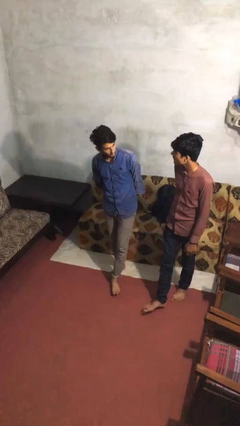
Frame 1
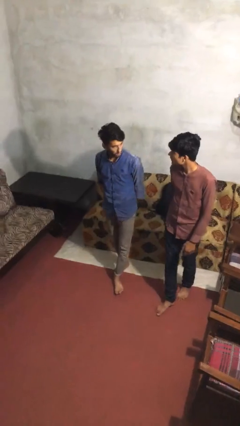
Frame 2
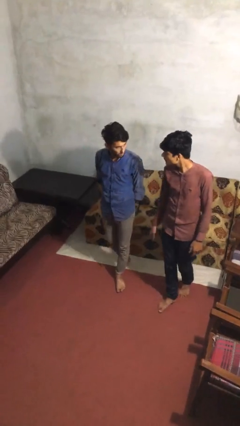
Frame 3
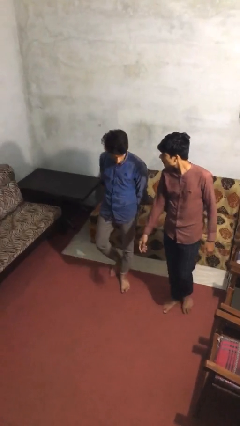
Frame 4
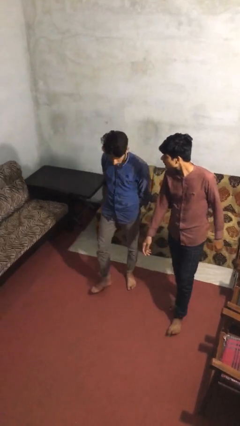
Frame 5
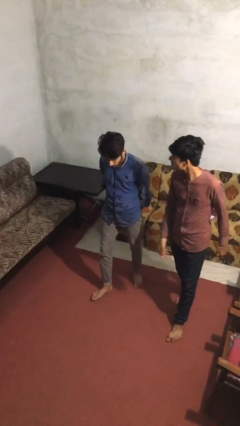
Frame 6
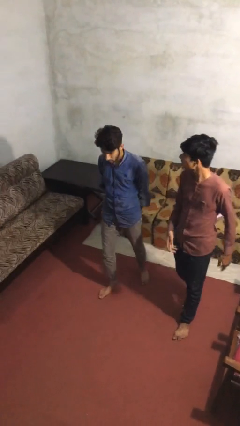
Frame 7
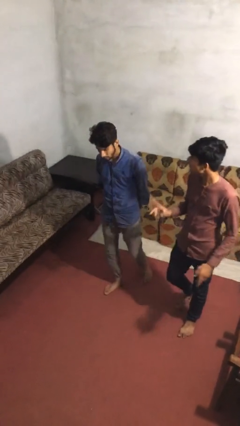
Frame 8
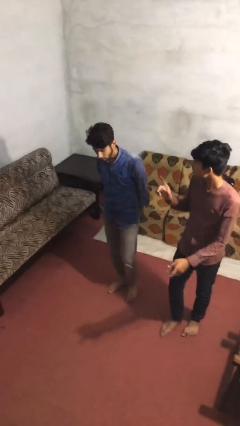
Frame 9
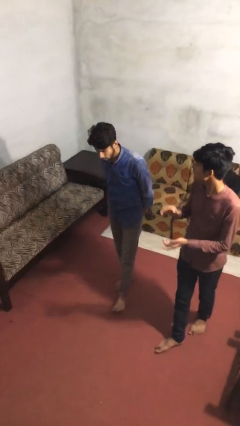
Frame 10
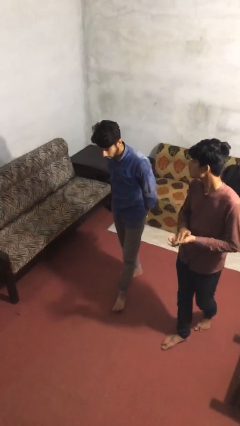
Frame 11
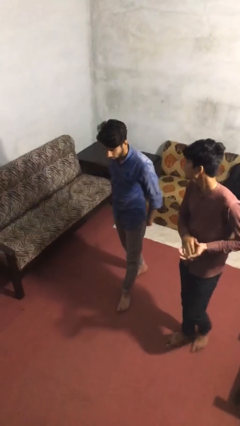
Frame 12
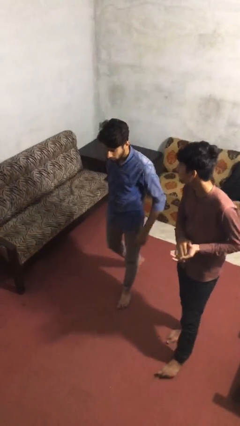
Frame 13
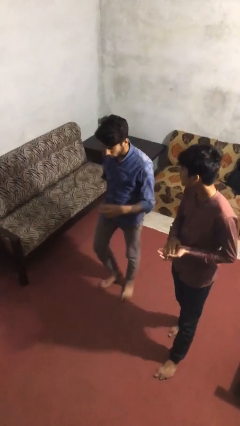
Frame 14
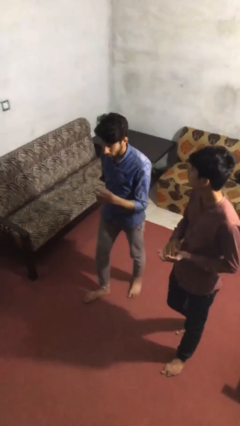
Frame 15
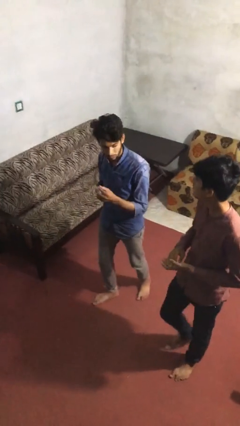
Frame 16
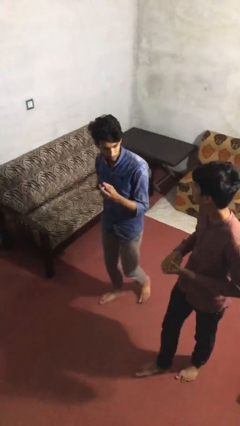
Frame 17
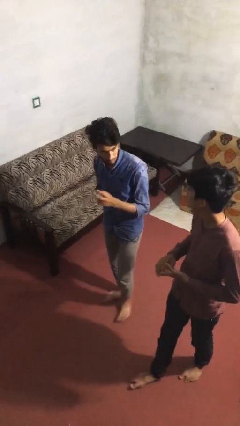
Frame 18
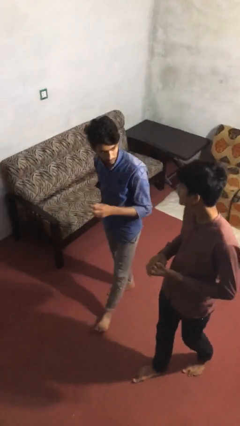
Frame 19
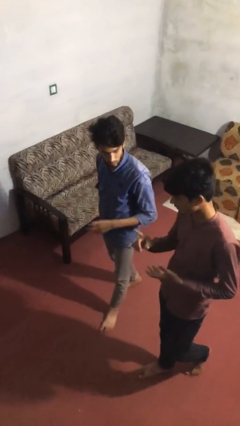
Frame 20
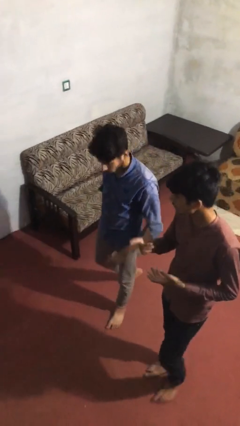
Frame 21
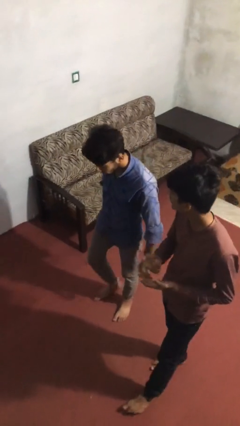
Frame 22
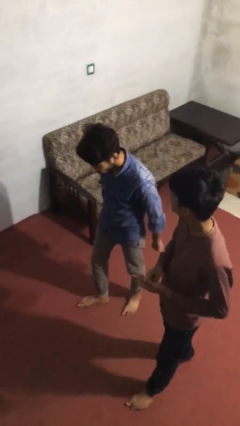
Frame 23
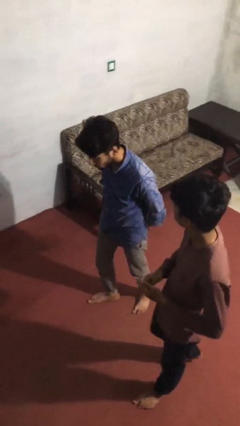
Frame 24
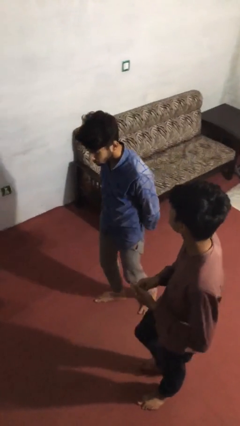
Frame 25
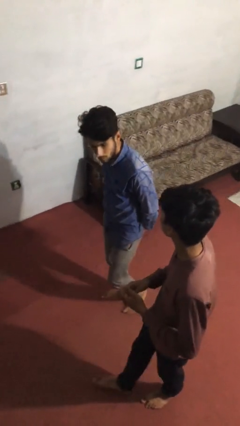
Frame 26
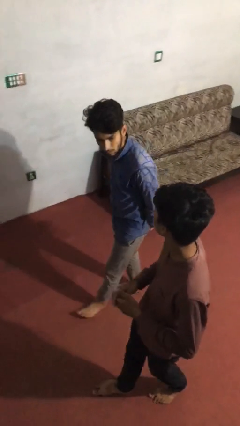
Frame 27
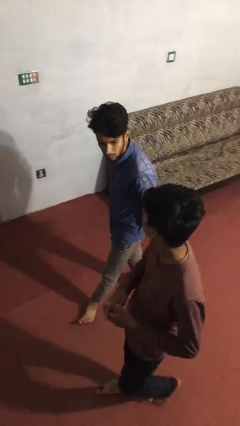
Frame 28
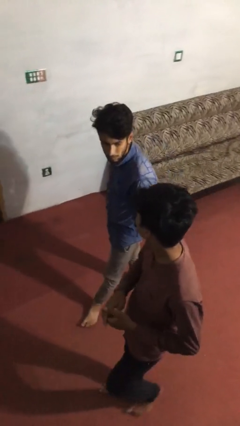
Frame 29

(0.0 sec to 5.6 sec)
person talks to person

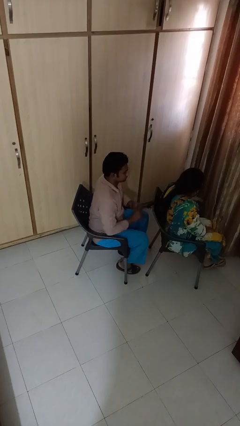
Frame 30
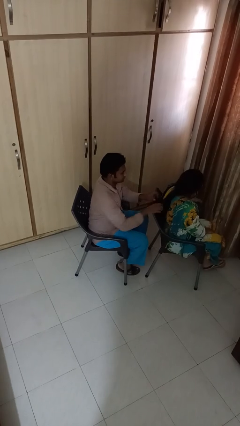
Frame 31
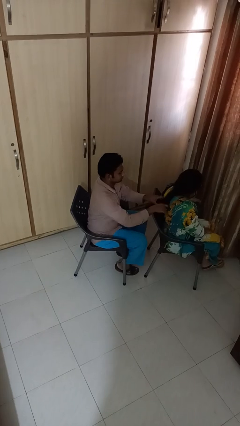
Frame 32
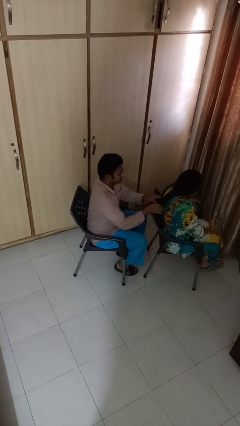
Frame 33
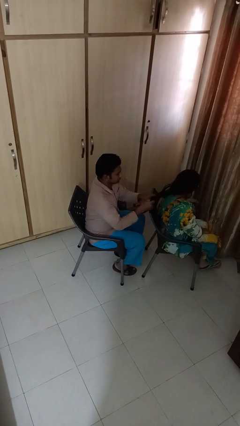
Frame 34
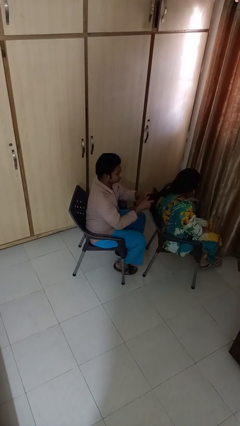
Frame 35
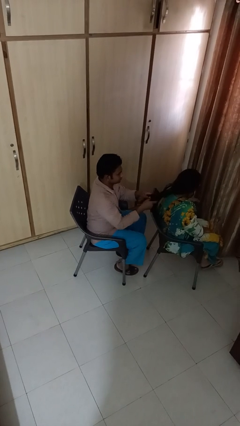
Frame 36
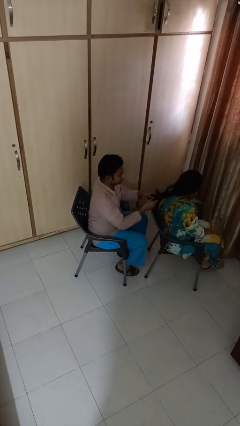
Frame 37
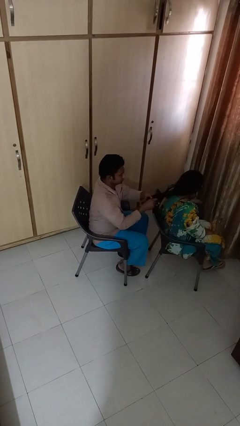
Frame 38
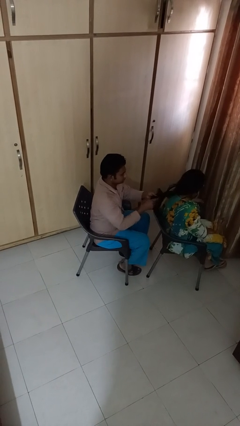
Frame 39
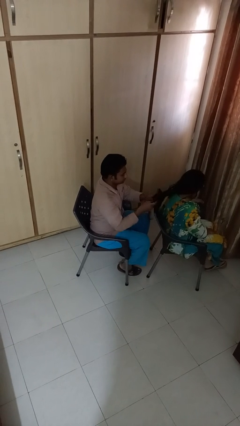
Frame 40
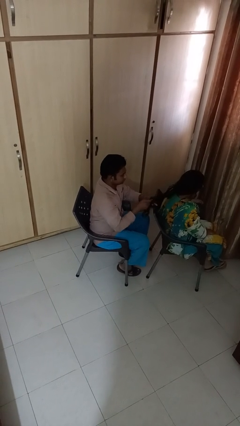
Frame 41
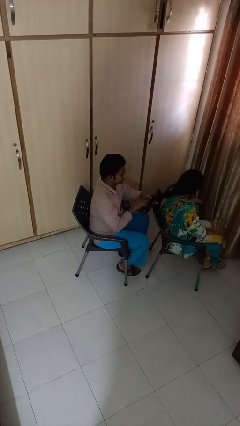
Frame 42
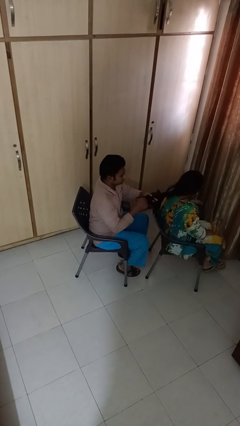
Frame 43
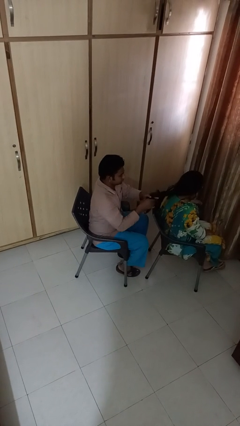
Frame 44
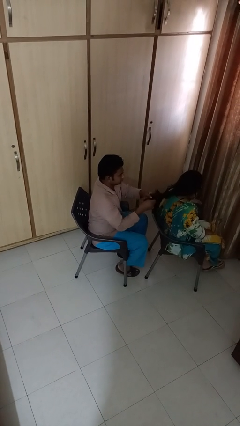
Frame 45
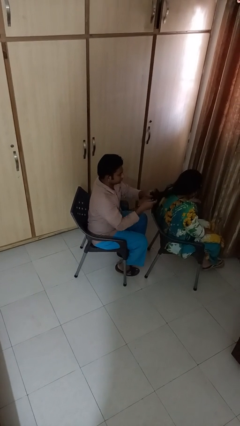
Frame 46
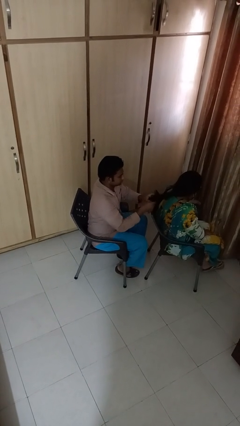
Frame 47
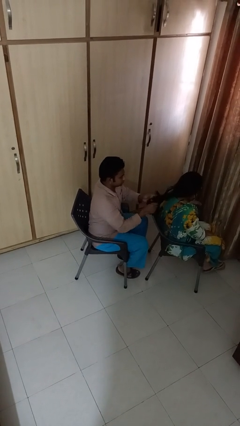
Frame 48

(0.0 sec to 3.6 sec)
person braids hair of person

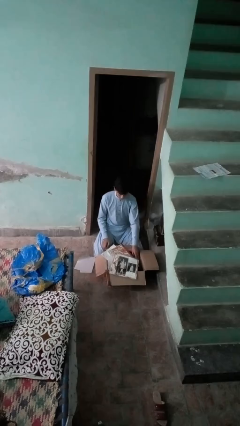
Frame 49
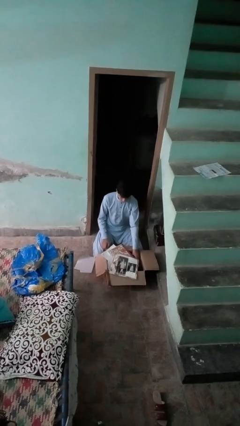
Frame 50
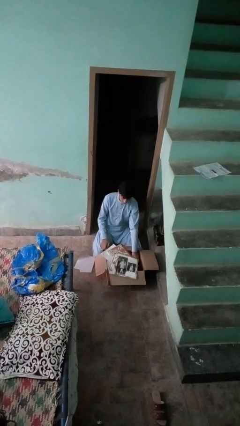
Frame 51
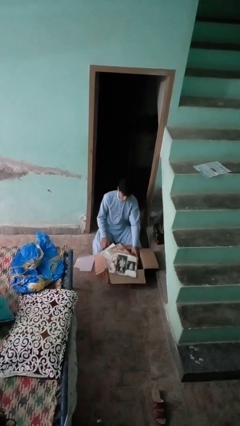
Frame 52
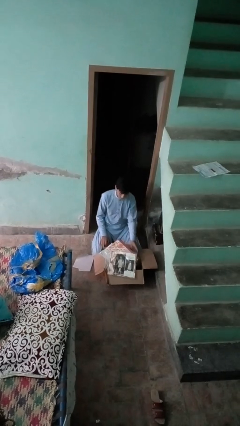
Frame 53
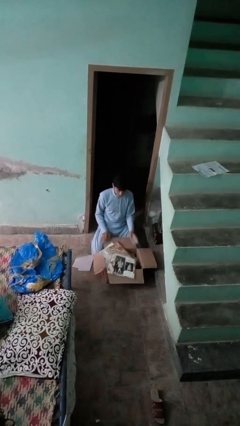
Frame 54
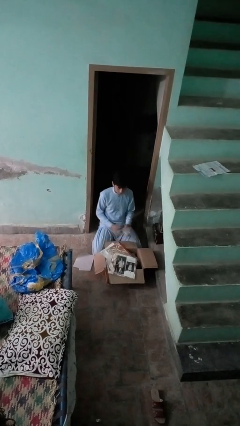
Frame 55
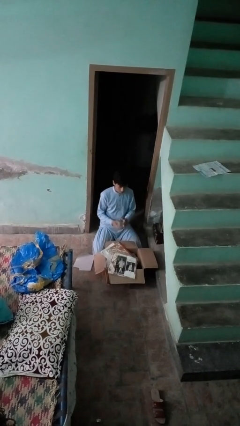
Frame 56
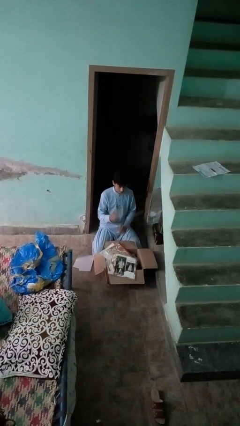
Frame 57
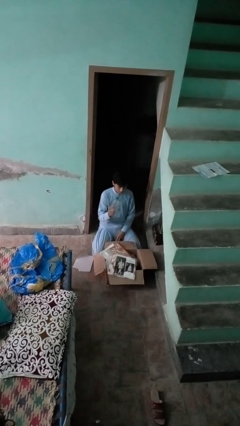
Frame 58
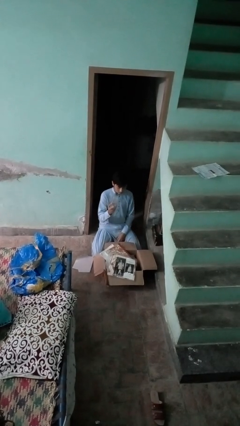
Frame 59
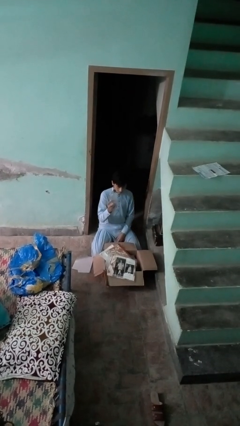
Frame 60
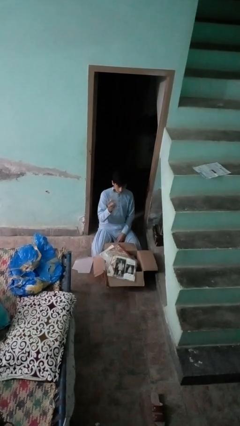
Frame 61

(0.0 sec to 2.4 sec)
person takes object from box

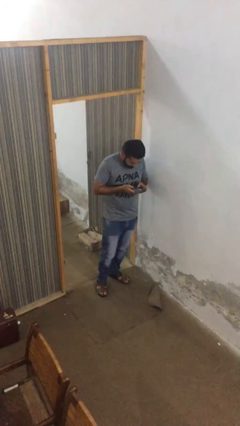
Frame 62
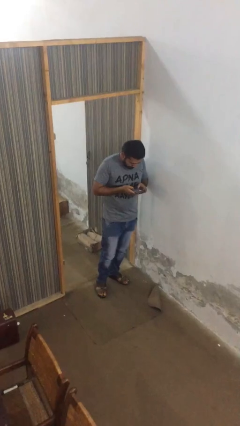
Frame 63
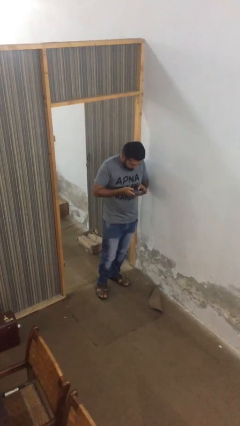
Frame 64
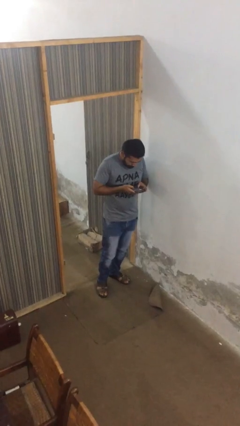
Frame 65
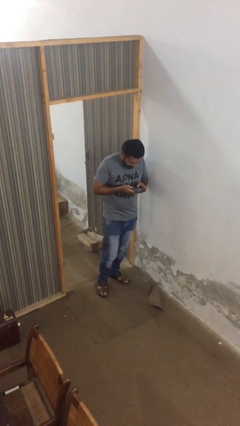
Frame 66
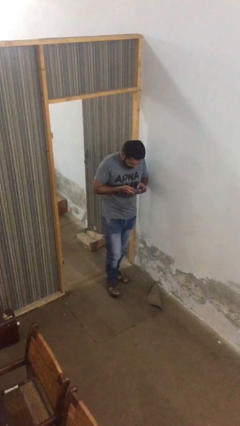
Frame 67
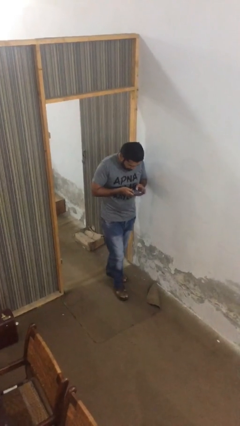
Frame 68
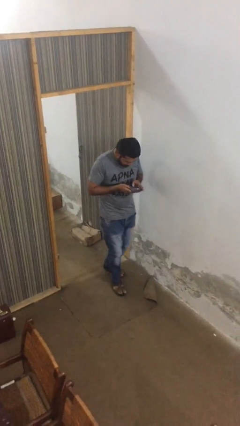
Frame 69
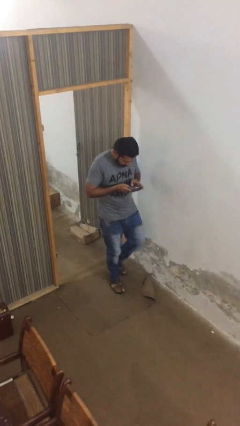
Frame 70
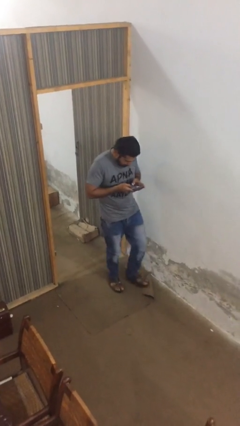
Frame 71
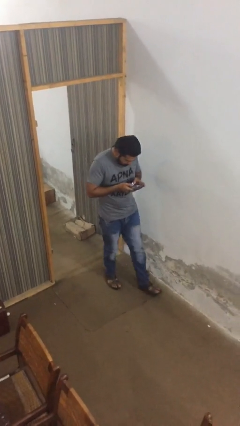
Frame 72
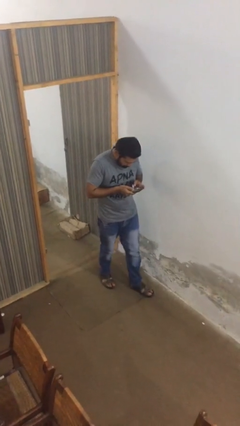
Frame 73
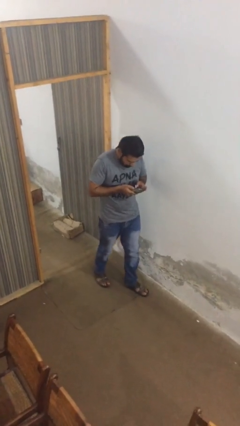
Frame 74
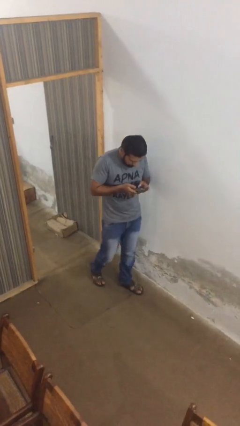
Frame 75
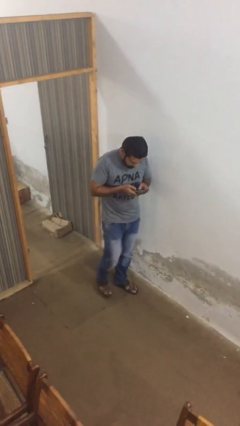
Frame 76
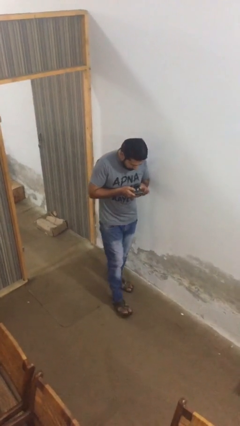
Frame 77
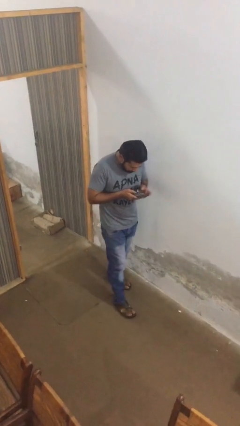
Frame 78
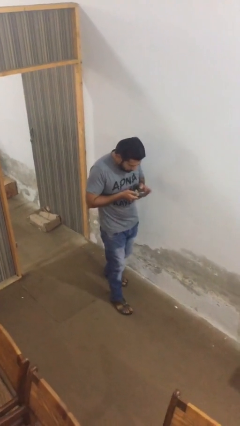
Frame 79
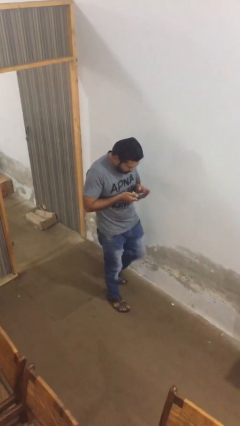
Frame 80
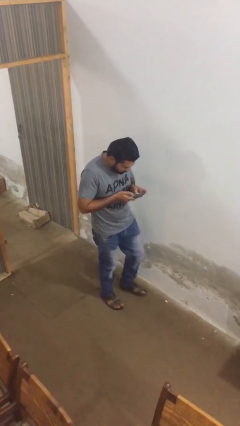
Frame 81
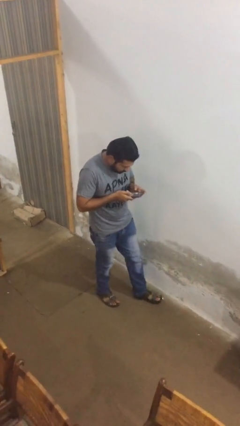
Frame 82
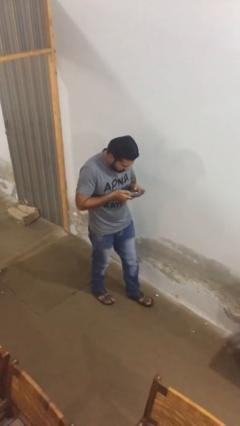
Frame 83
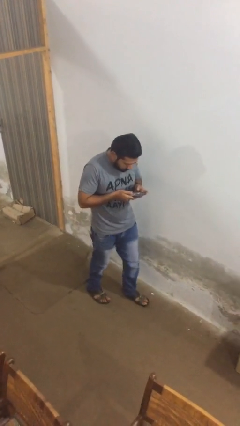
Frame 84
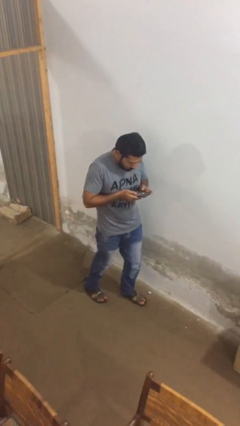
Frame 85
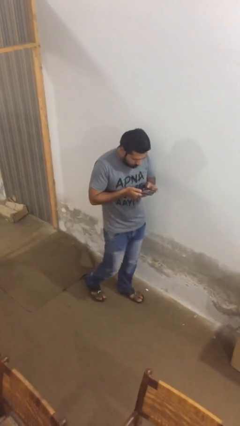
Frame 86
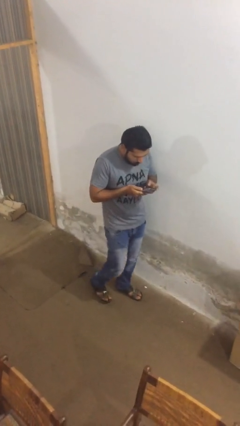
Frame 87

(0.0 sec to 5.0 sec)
person texts on phone

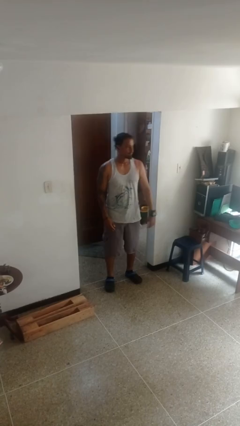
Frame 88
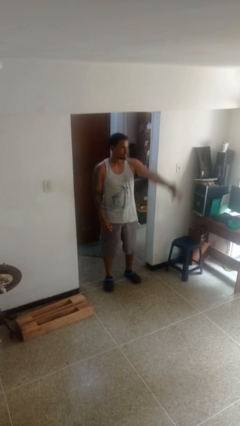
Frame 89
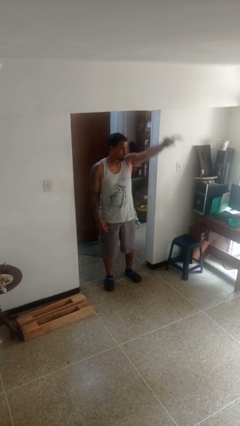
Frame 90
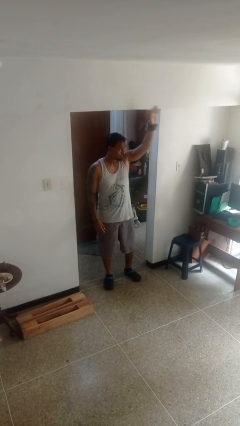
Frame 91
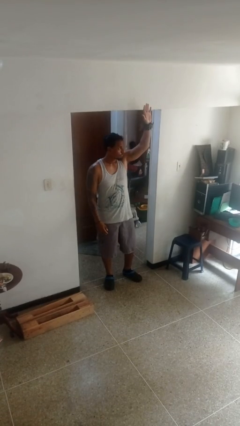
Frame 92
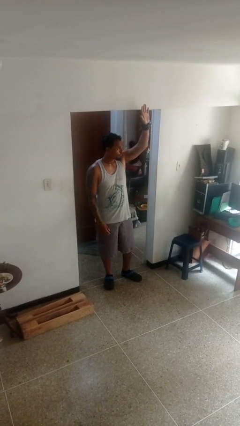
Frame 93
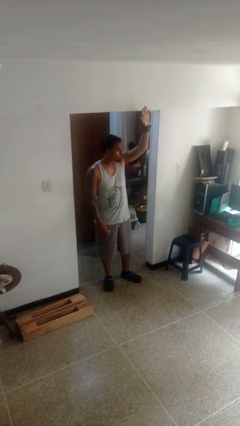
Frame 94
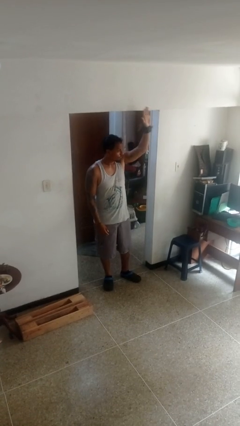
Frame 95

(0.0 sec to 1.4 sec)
person gestures swipe up
